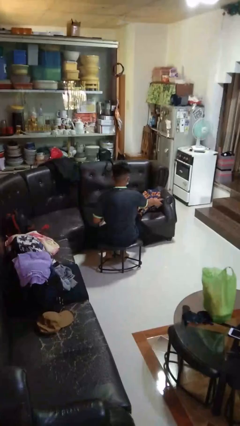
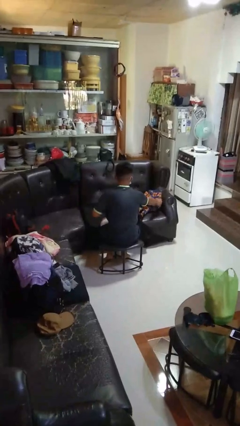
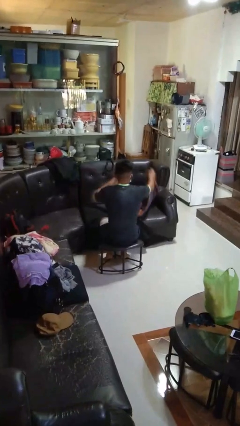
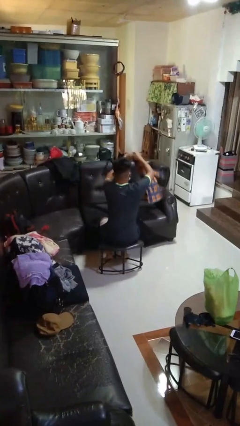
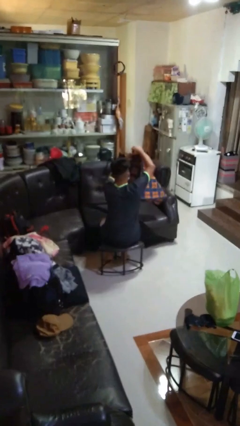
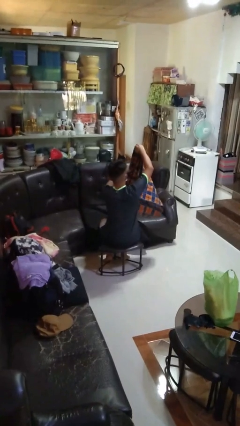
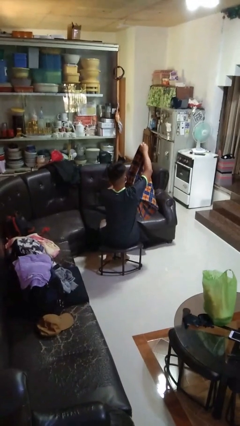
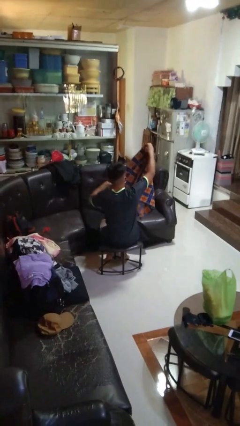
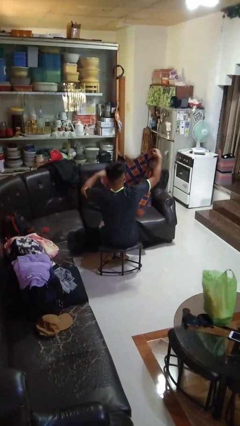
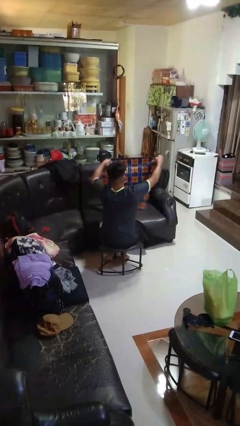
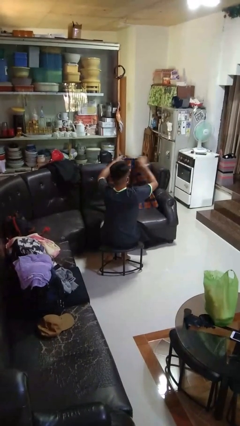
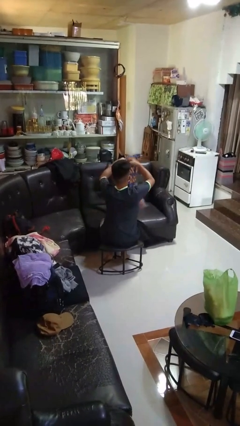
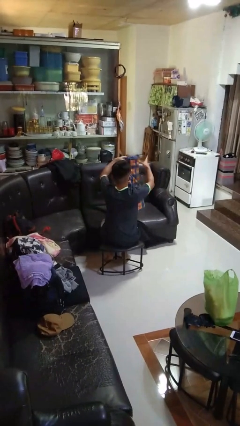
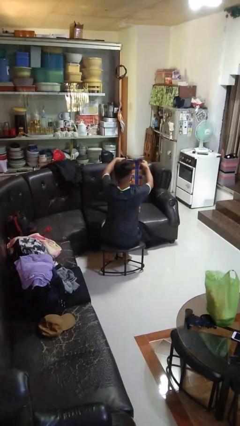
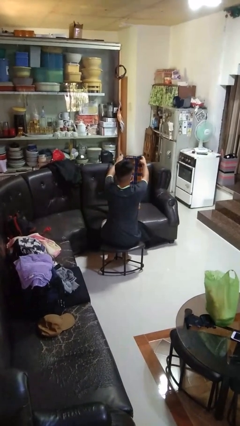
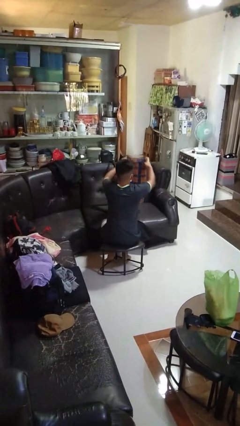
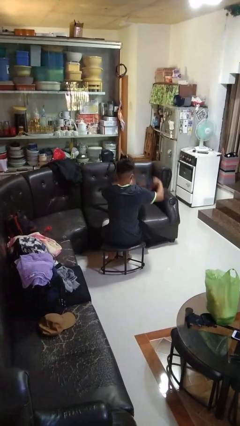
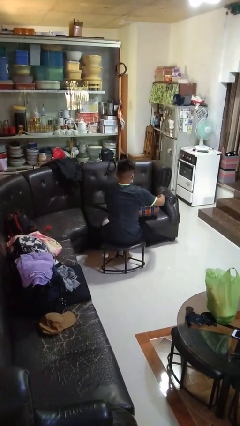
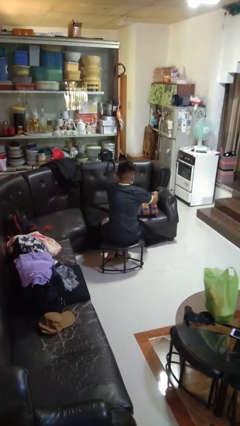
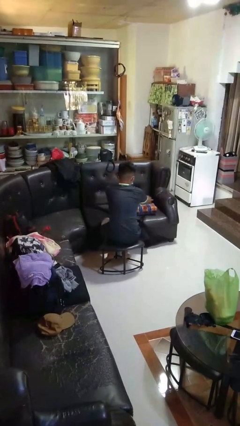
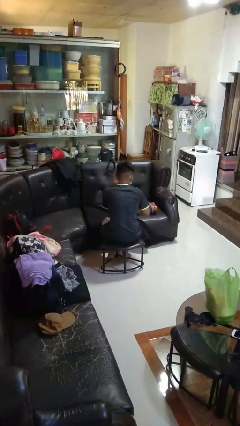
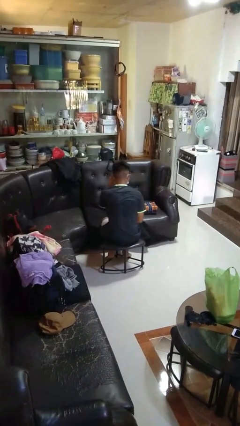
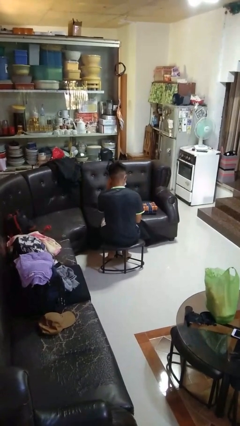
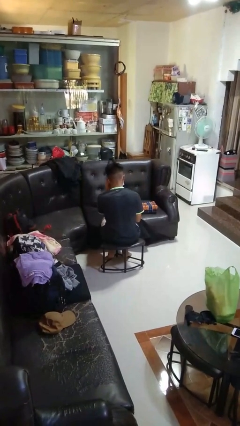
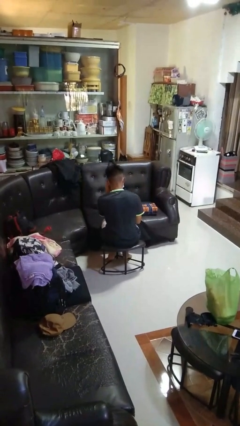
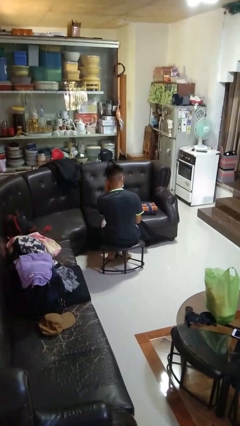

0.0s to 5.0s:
person folds blanket

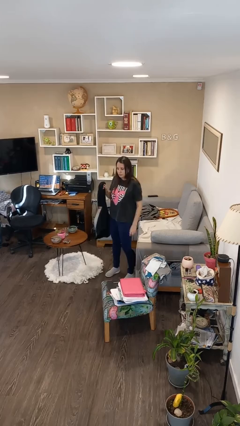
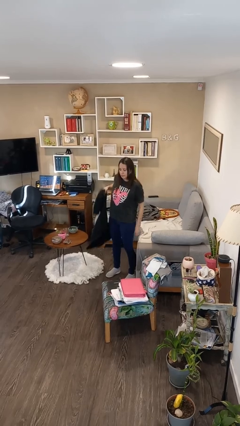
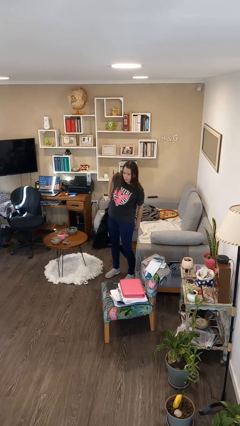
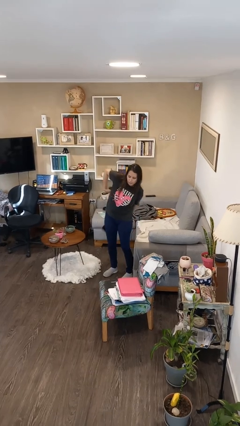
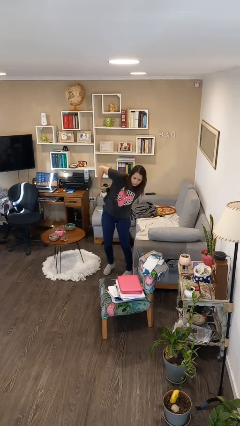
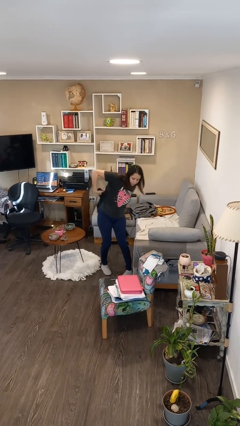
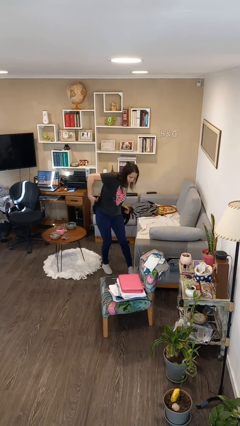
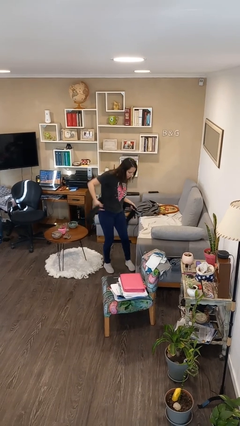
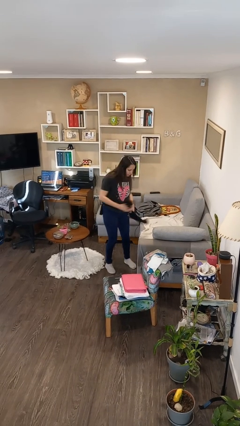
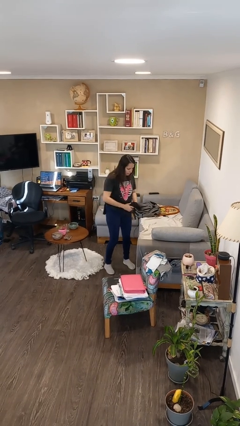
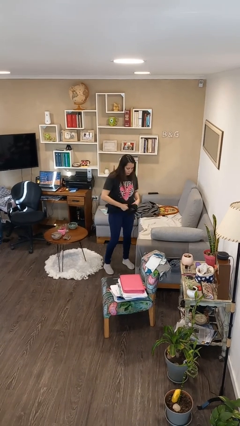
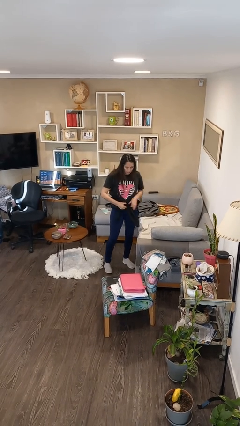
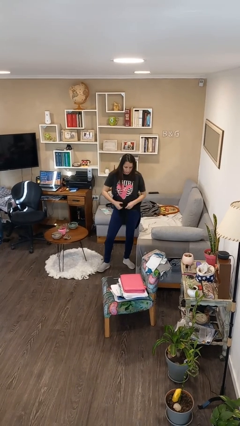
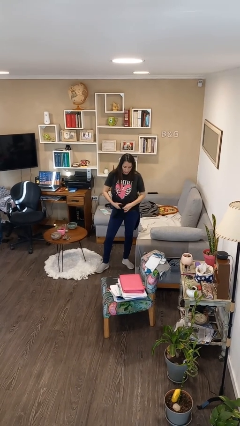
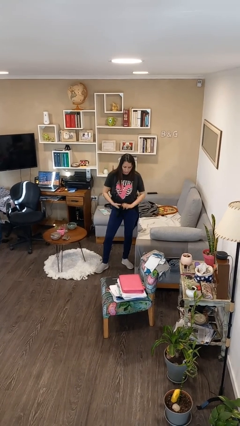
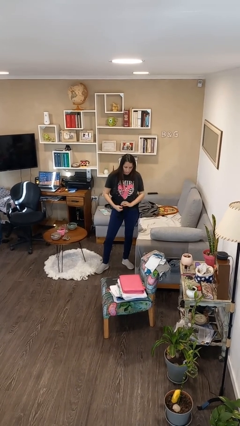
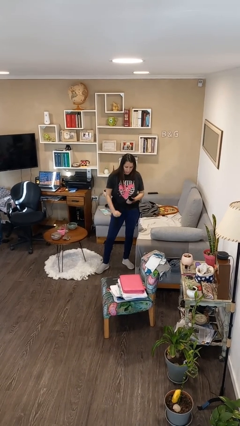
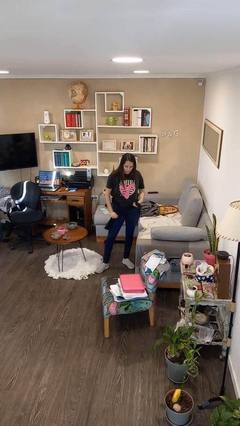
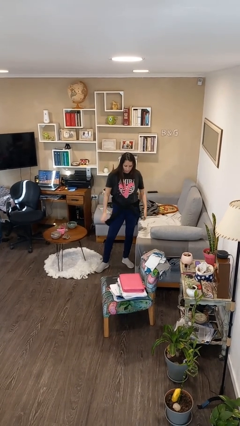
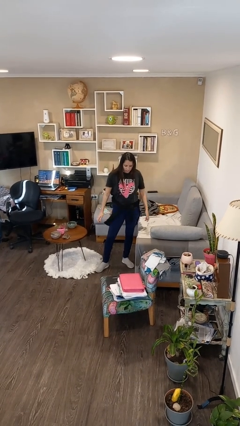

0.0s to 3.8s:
person ties jacket around waist

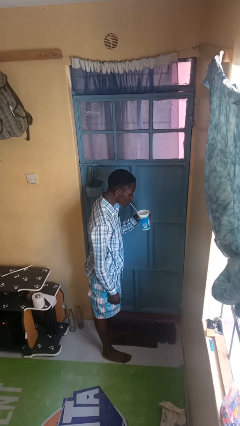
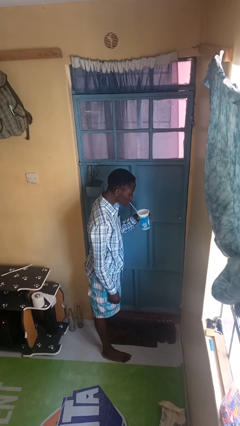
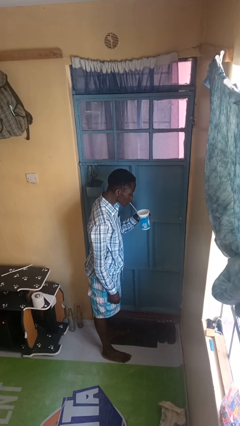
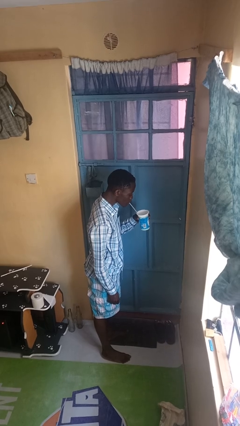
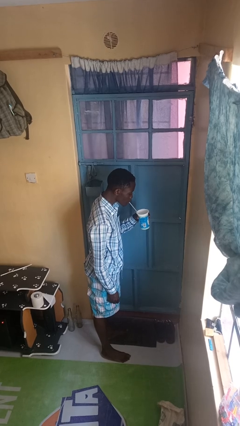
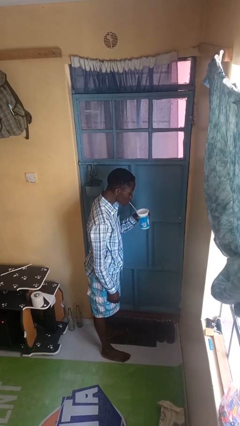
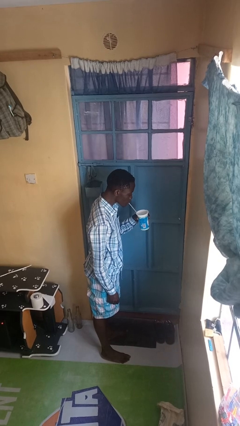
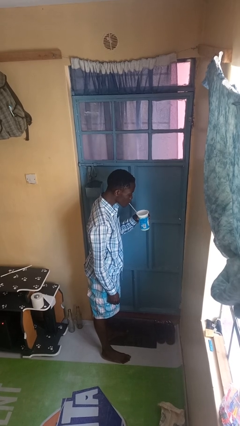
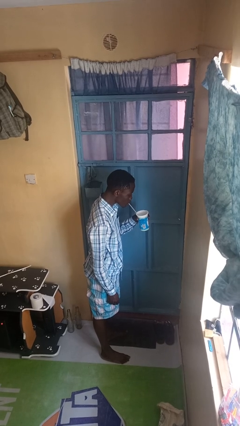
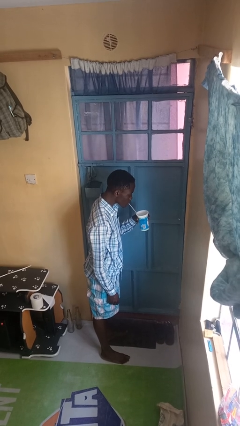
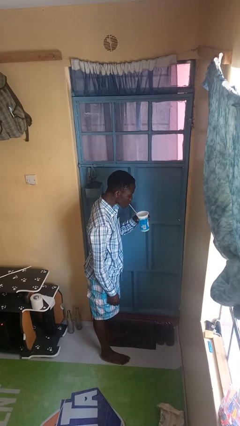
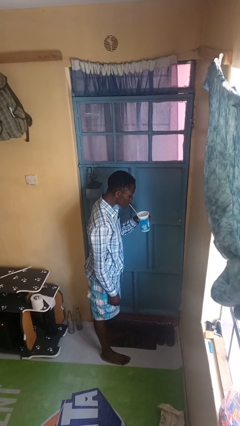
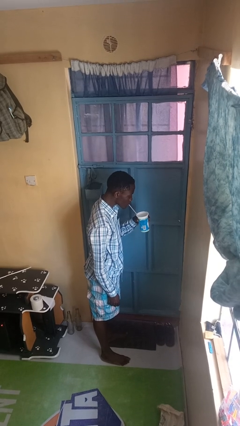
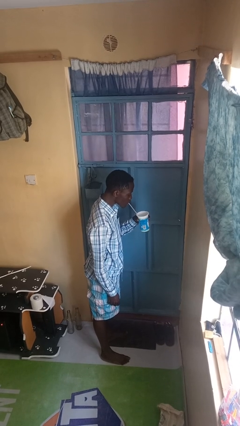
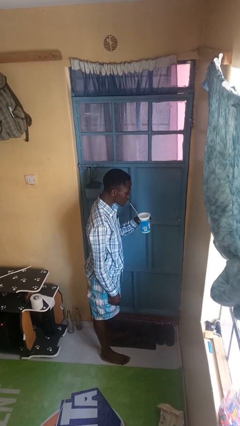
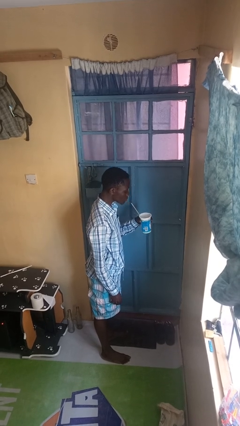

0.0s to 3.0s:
person drinks from straw

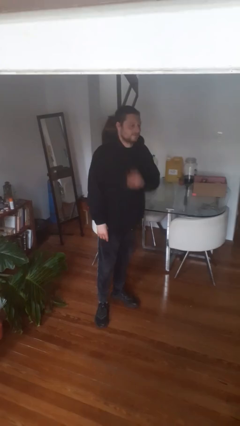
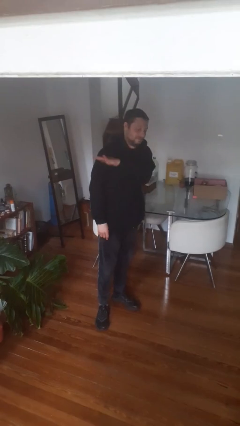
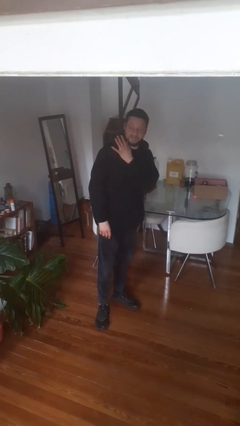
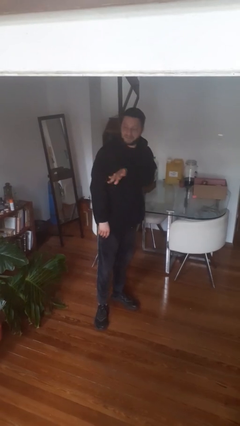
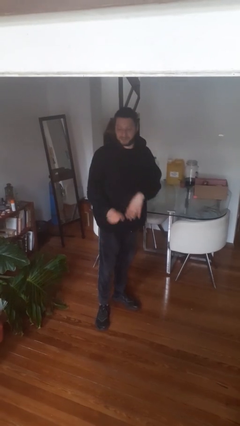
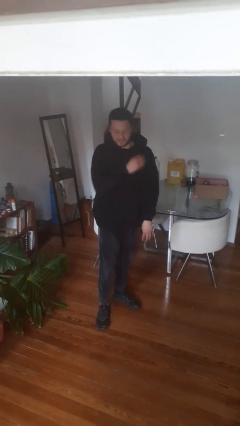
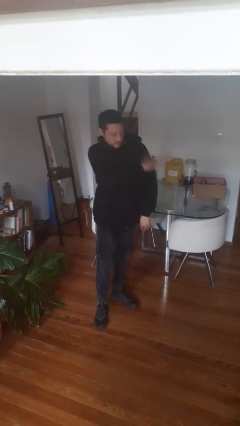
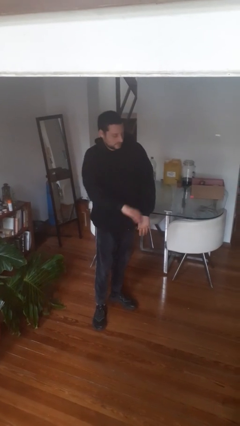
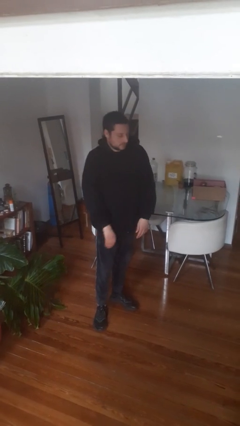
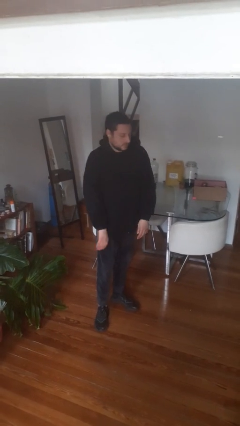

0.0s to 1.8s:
person swats bug

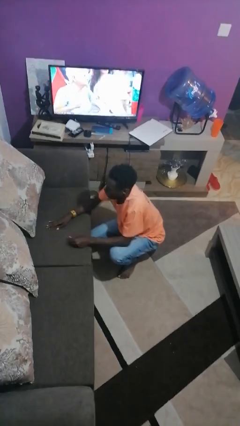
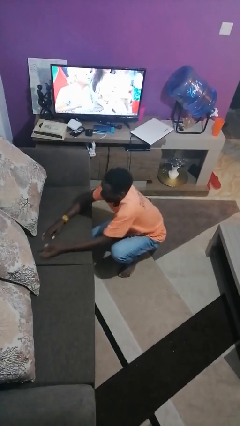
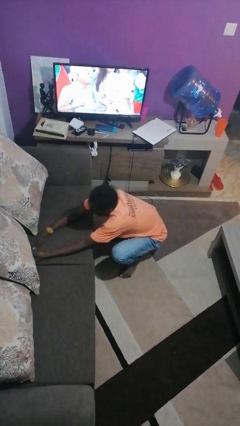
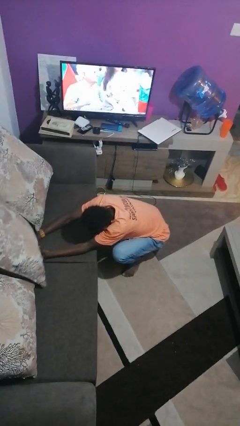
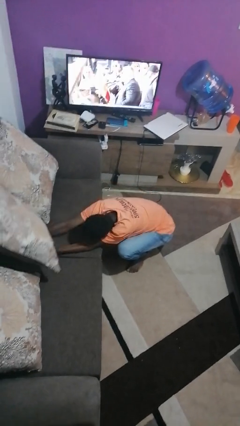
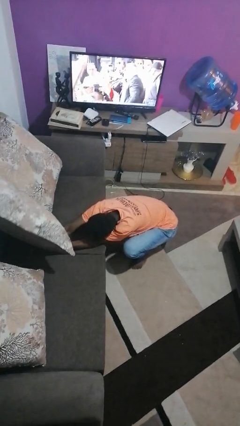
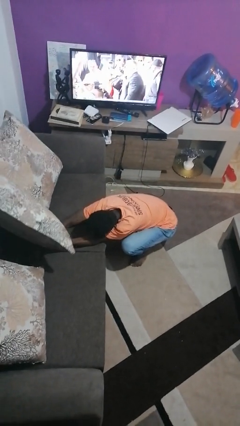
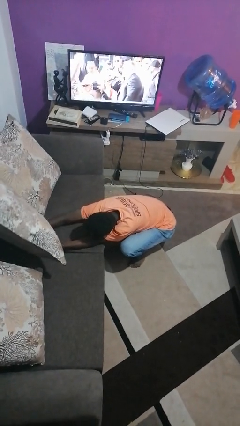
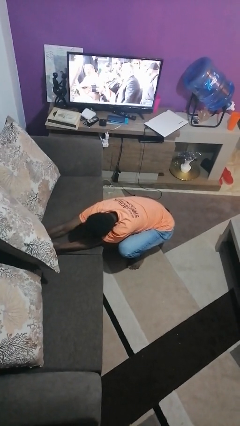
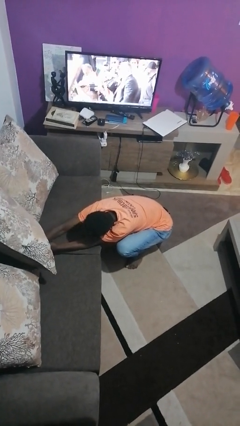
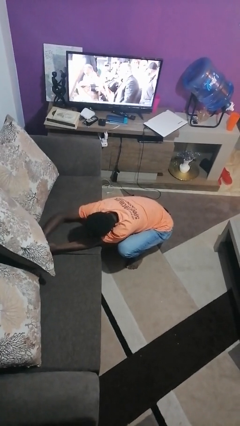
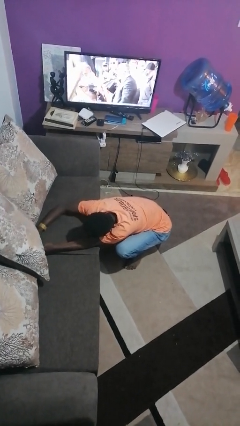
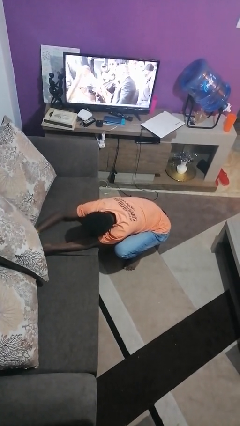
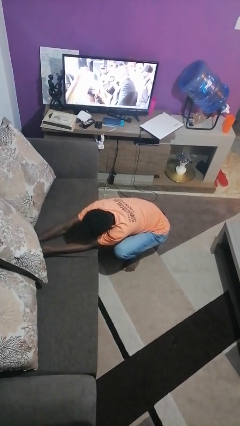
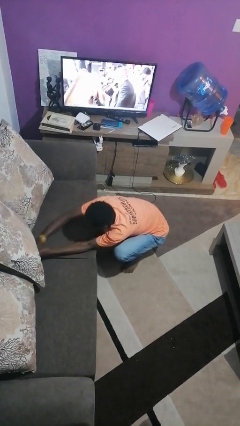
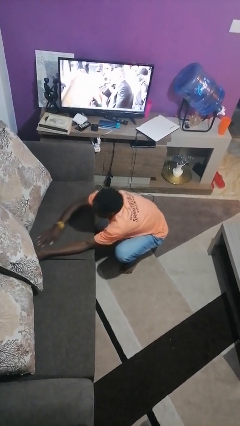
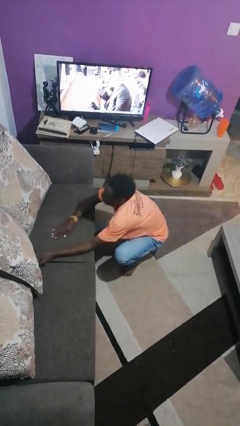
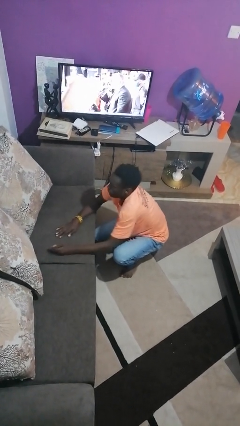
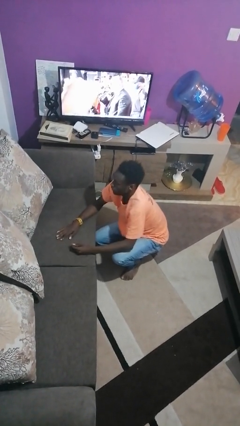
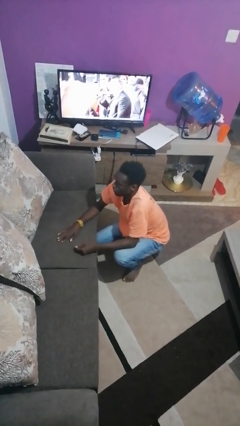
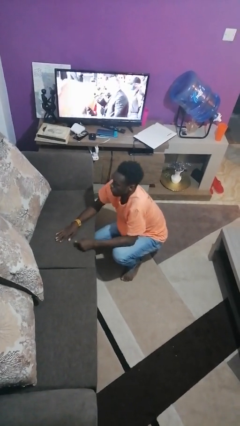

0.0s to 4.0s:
person searches in couch
